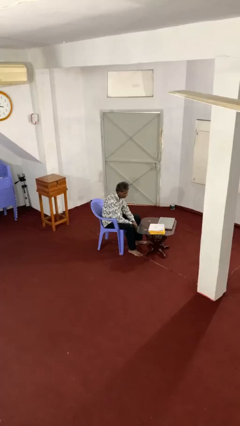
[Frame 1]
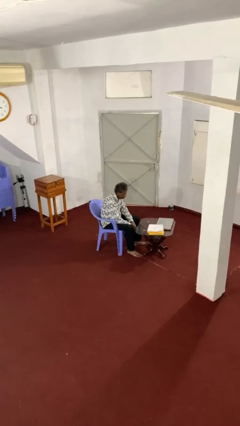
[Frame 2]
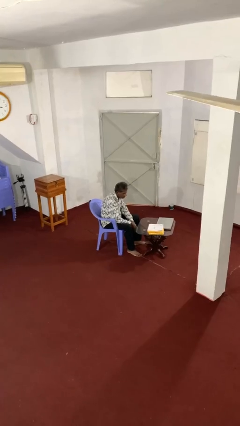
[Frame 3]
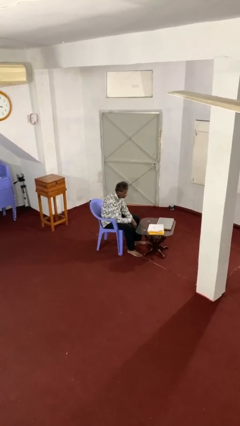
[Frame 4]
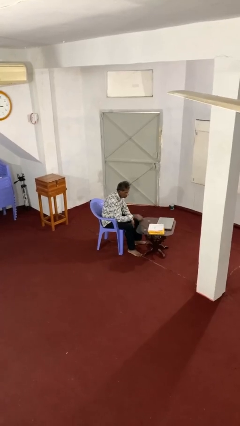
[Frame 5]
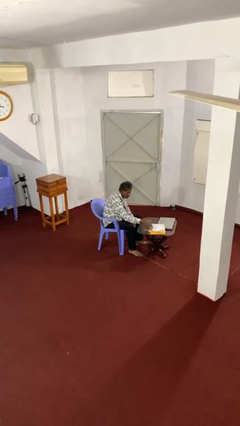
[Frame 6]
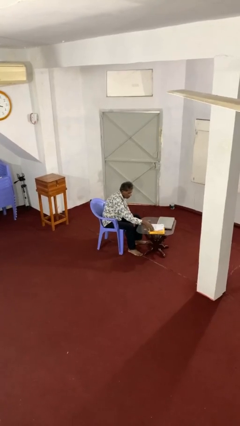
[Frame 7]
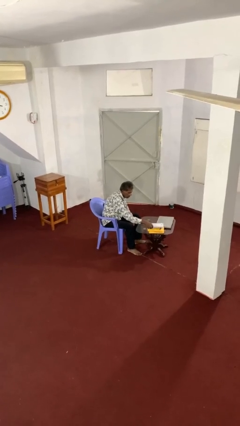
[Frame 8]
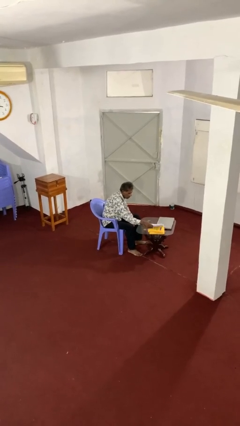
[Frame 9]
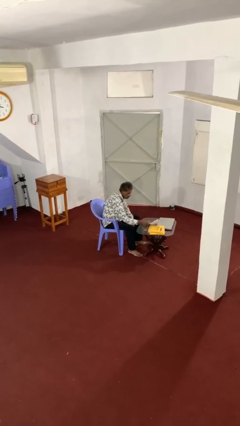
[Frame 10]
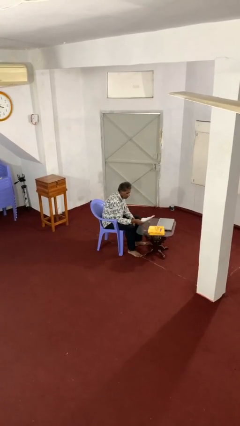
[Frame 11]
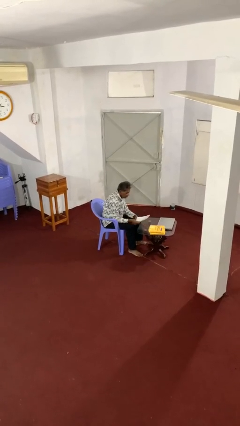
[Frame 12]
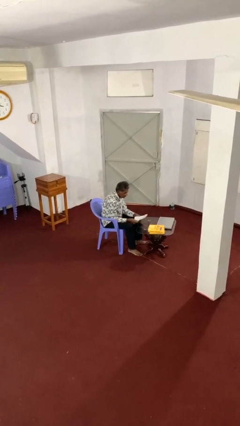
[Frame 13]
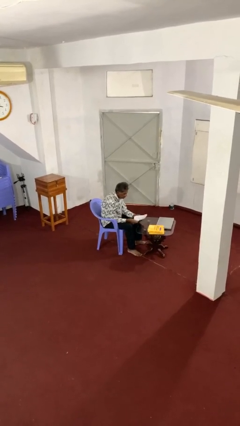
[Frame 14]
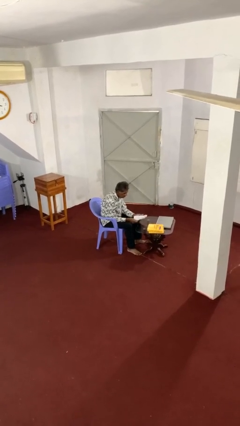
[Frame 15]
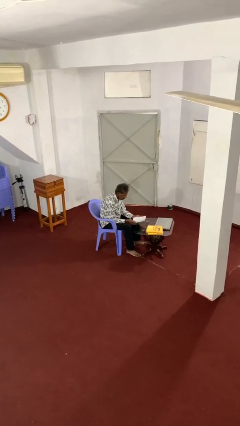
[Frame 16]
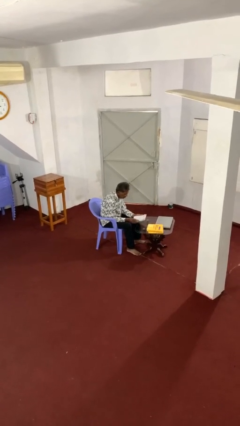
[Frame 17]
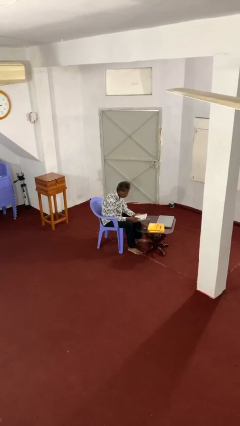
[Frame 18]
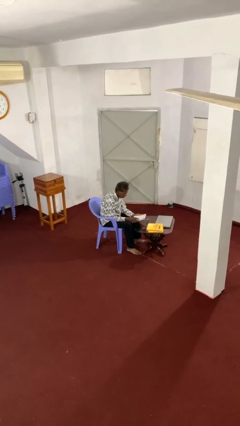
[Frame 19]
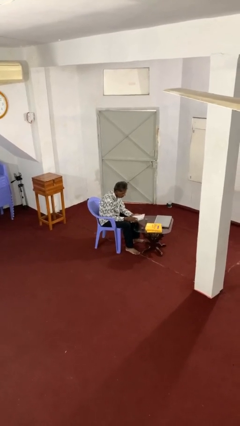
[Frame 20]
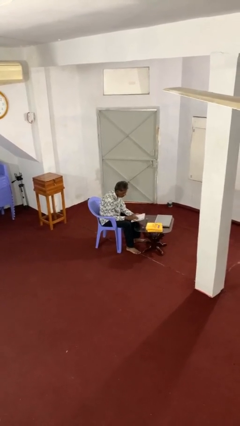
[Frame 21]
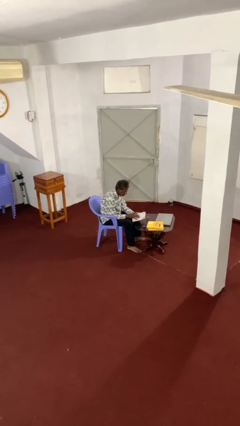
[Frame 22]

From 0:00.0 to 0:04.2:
person picks up object from table

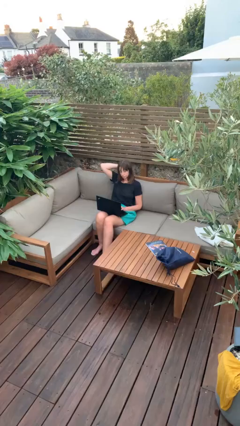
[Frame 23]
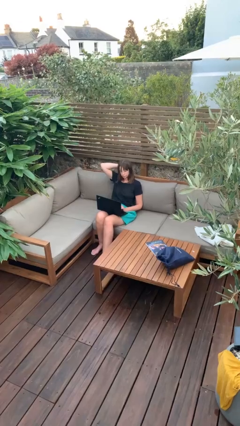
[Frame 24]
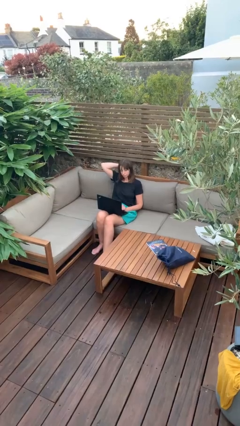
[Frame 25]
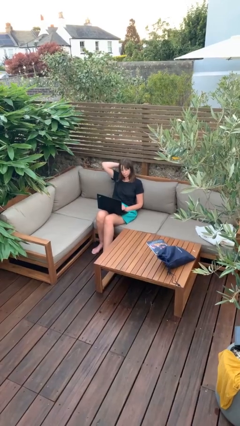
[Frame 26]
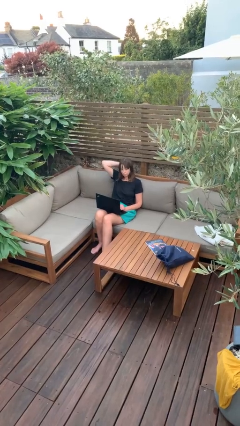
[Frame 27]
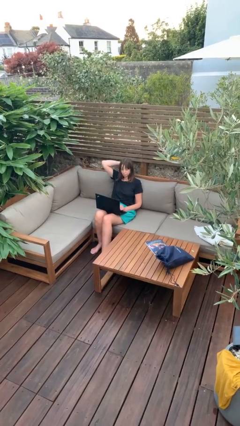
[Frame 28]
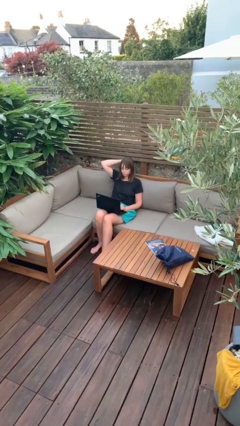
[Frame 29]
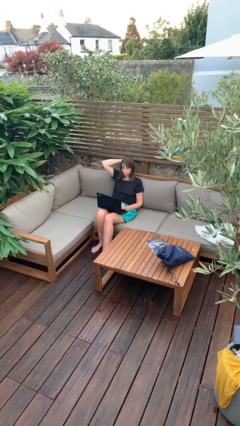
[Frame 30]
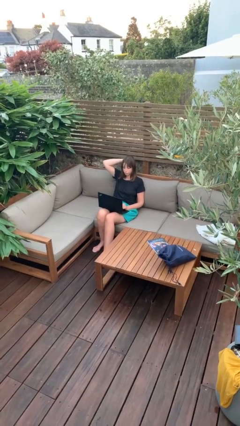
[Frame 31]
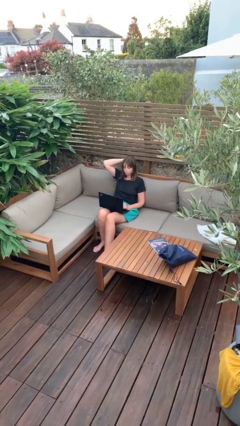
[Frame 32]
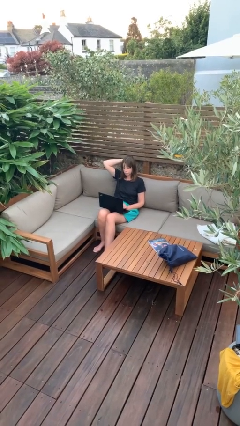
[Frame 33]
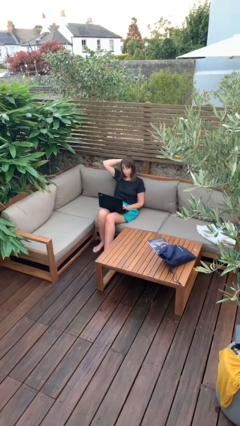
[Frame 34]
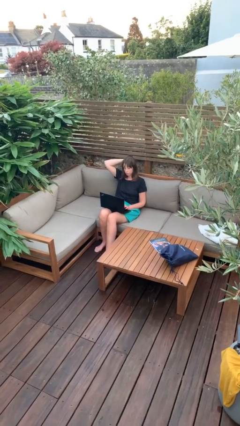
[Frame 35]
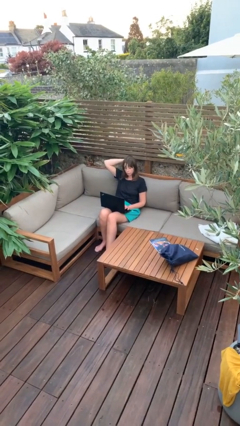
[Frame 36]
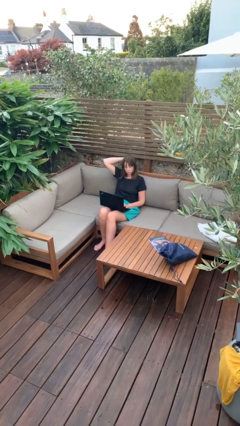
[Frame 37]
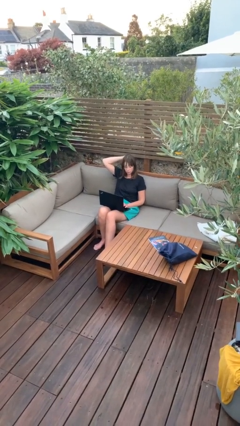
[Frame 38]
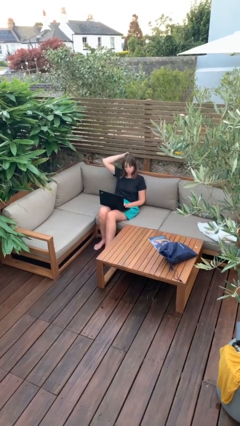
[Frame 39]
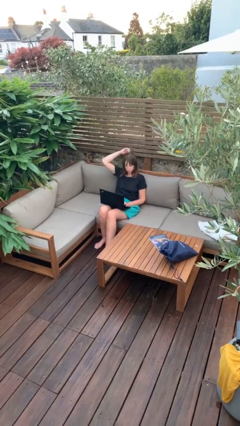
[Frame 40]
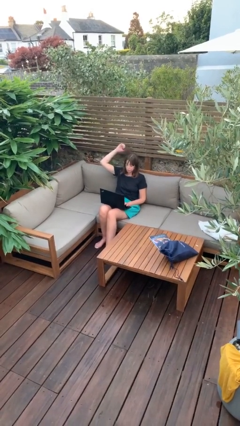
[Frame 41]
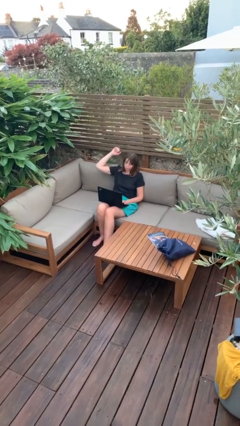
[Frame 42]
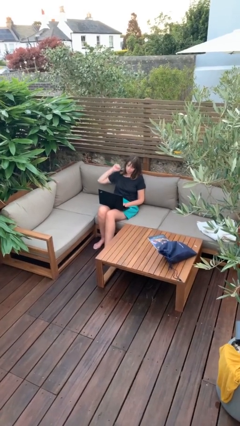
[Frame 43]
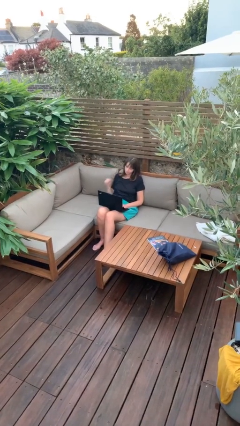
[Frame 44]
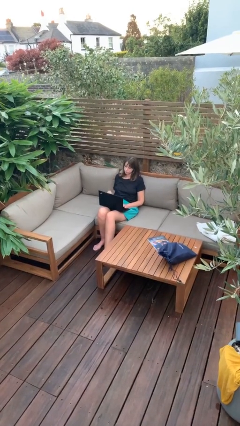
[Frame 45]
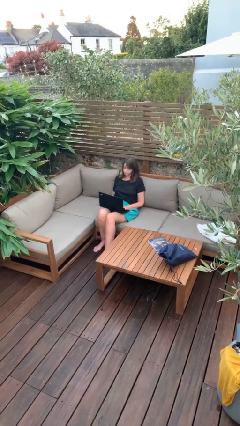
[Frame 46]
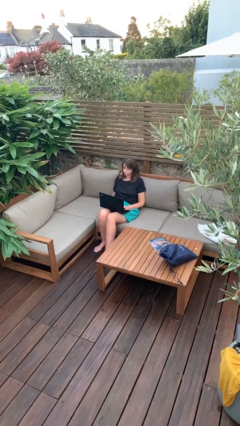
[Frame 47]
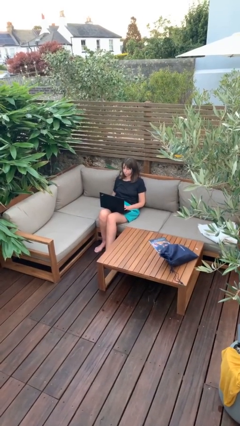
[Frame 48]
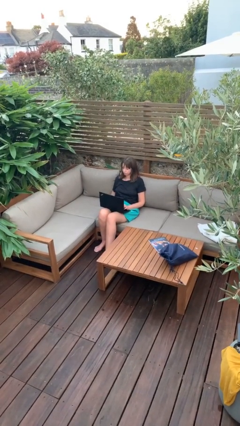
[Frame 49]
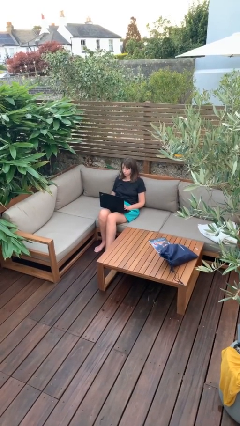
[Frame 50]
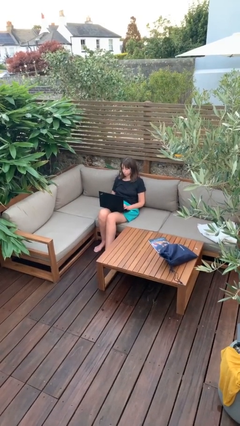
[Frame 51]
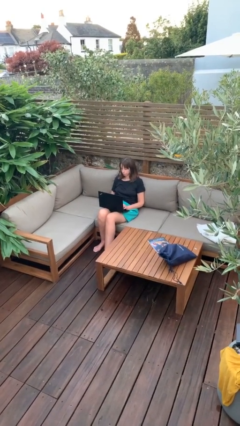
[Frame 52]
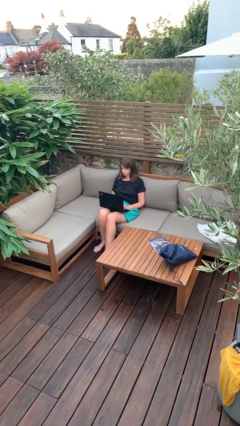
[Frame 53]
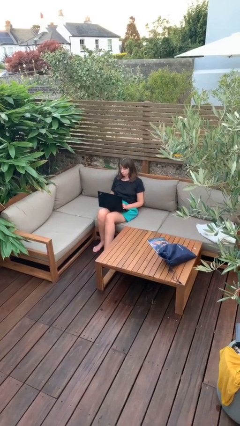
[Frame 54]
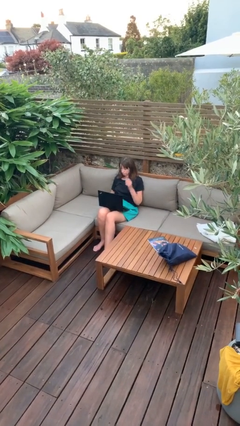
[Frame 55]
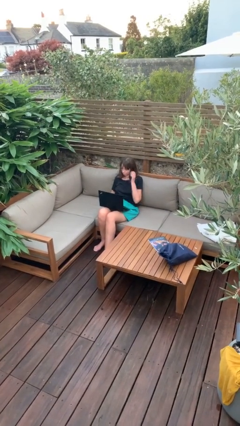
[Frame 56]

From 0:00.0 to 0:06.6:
person interacts with laptop

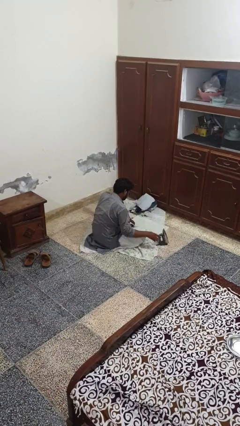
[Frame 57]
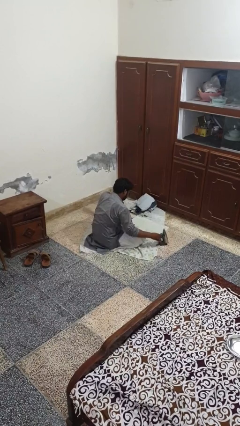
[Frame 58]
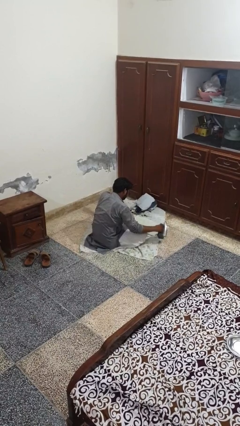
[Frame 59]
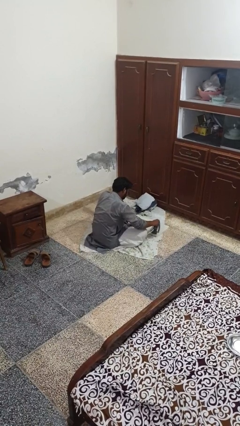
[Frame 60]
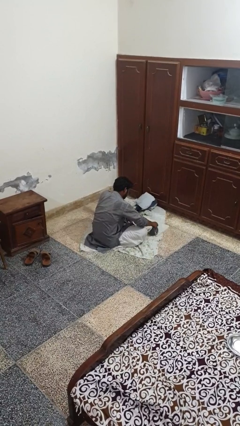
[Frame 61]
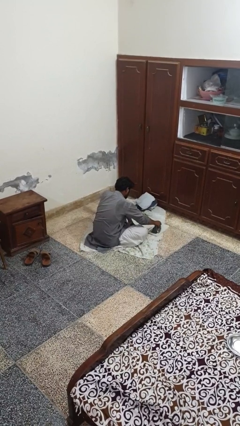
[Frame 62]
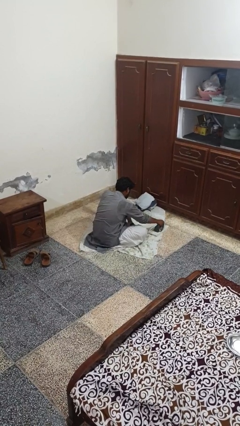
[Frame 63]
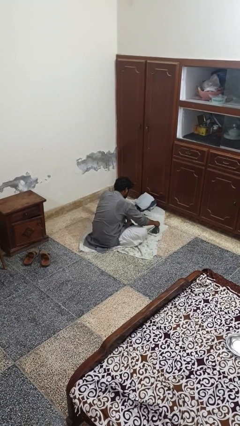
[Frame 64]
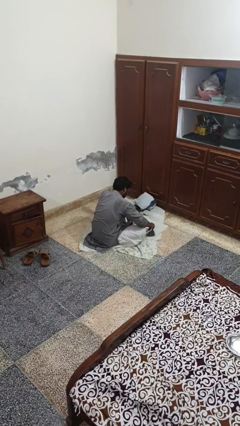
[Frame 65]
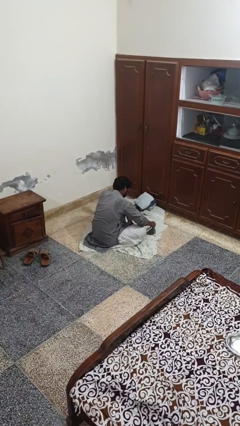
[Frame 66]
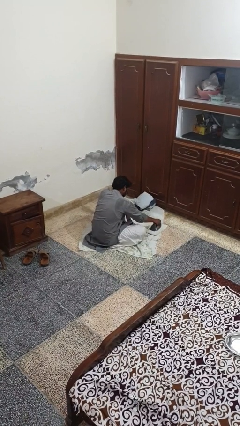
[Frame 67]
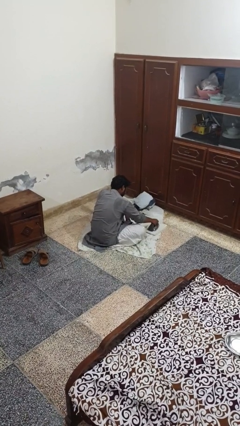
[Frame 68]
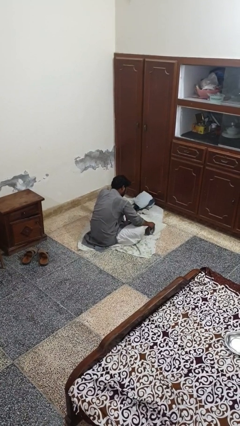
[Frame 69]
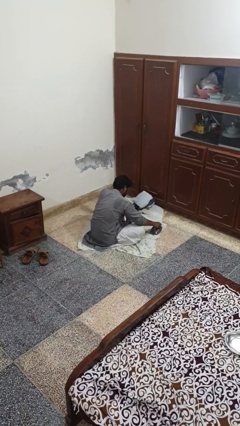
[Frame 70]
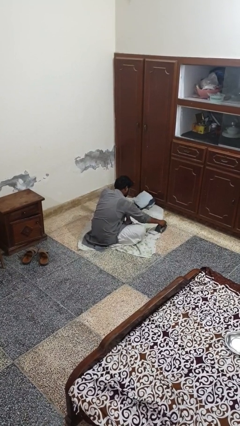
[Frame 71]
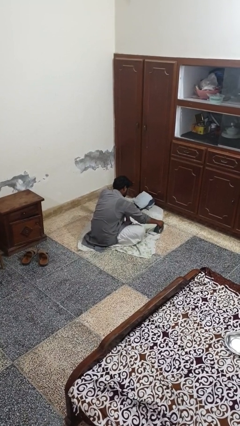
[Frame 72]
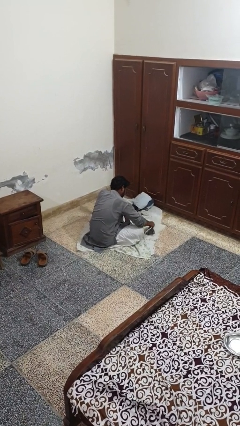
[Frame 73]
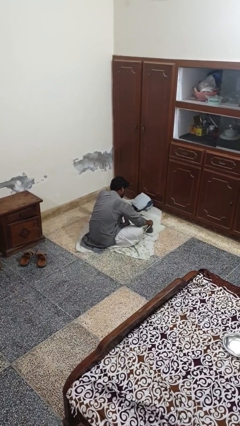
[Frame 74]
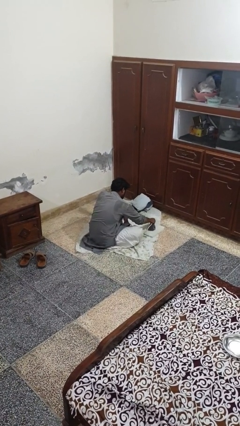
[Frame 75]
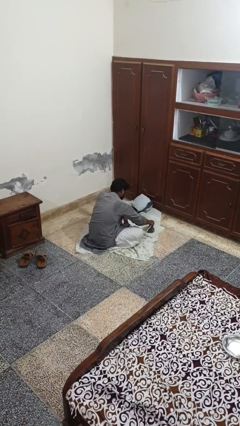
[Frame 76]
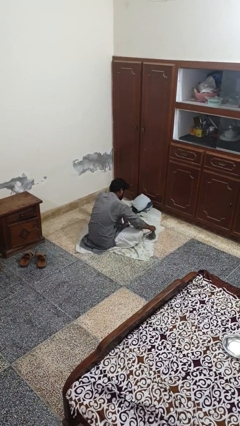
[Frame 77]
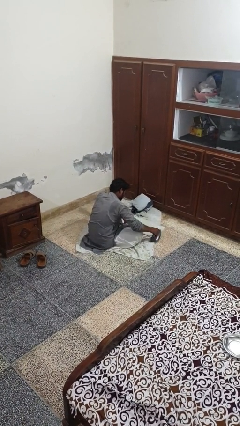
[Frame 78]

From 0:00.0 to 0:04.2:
person irons clothes

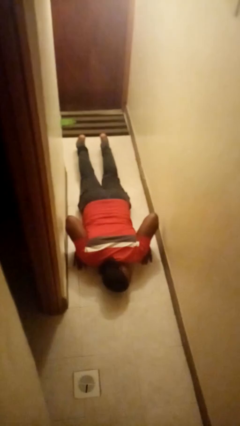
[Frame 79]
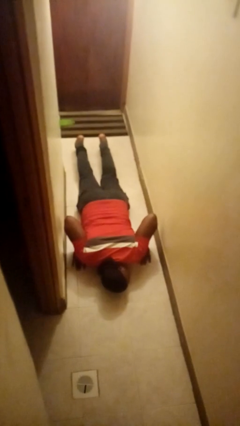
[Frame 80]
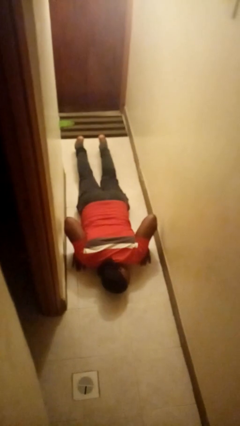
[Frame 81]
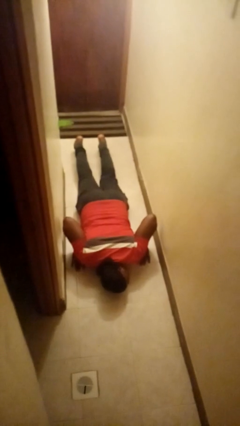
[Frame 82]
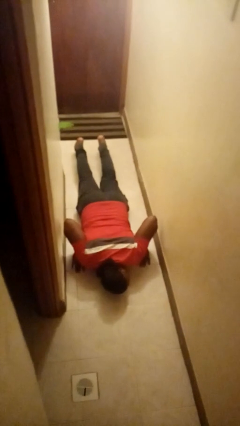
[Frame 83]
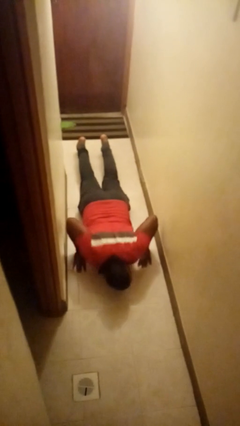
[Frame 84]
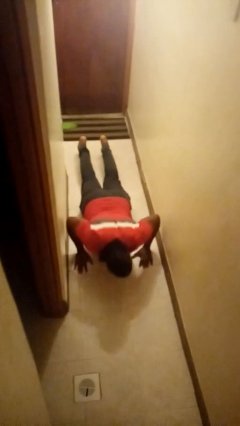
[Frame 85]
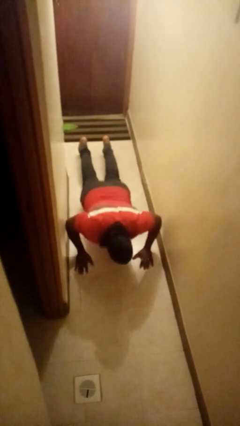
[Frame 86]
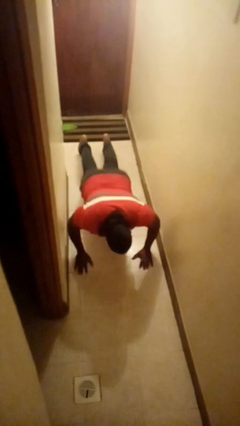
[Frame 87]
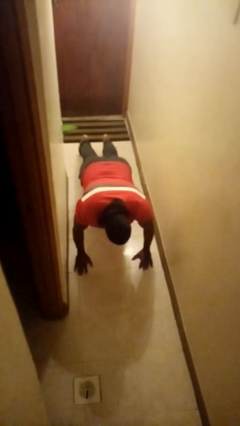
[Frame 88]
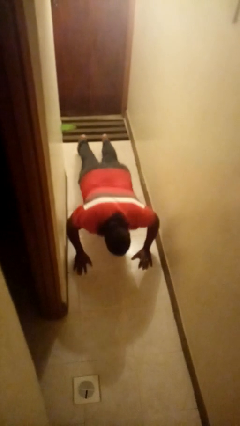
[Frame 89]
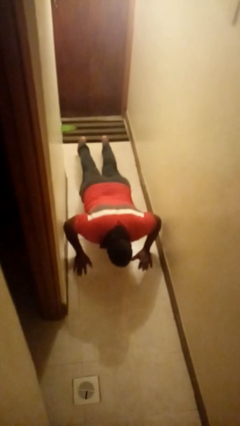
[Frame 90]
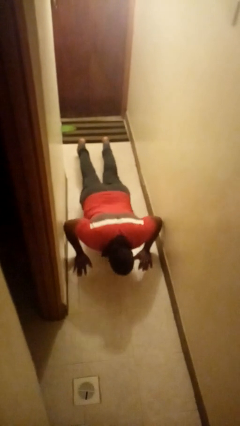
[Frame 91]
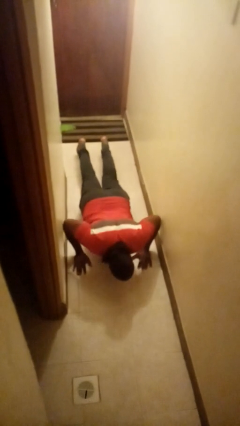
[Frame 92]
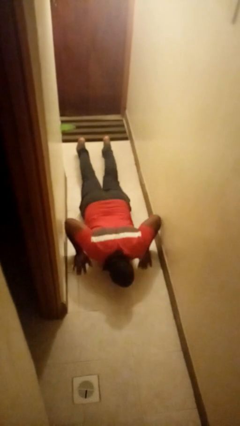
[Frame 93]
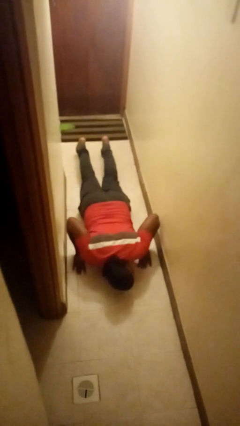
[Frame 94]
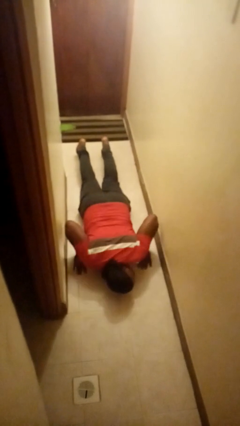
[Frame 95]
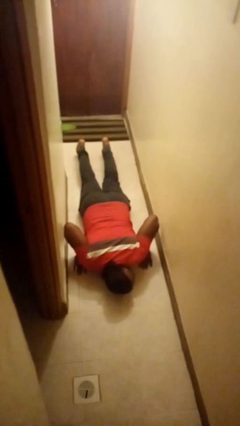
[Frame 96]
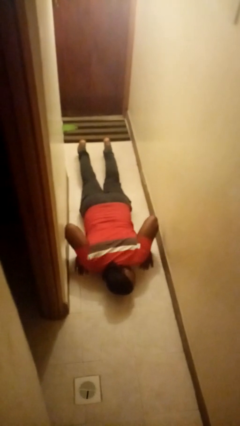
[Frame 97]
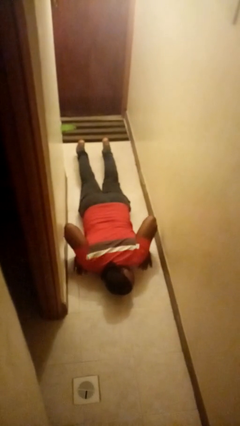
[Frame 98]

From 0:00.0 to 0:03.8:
person exercises with pushup
